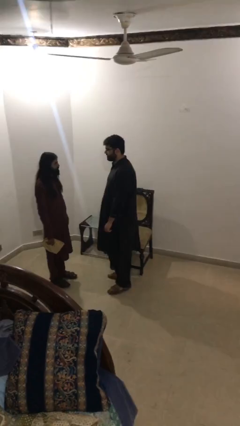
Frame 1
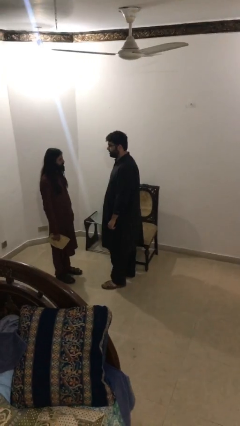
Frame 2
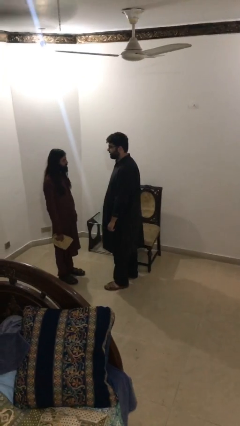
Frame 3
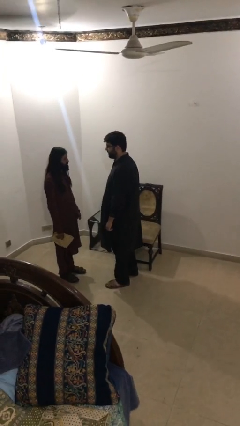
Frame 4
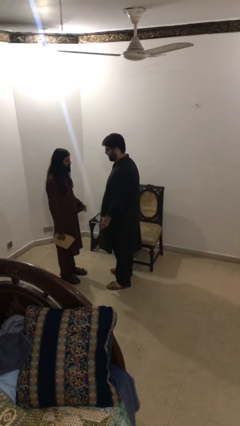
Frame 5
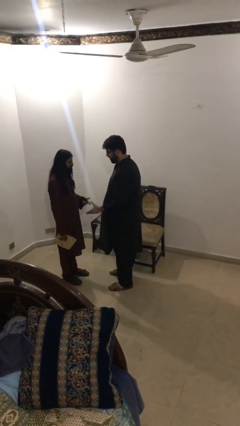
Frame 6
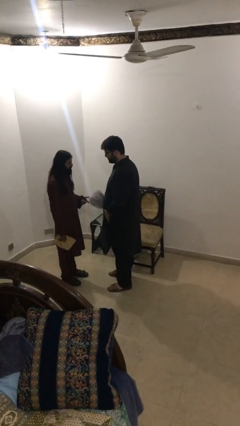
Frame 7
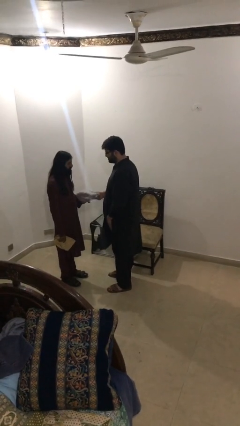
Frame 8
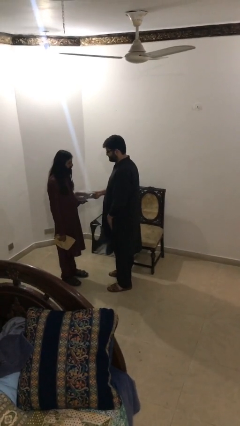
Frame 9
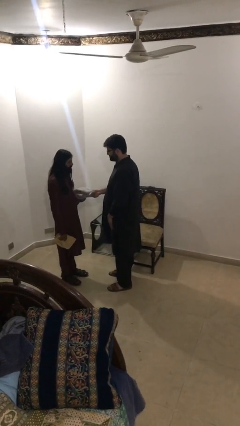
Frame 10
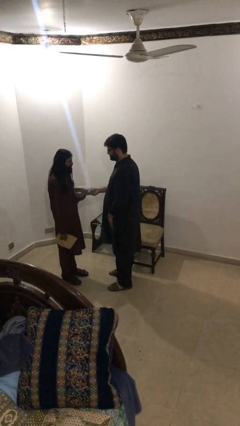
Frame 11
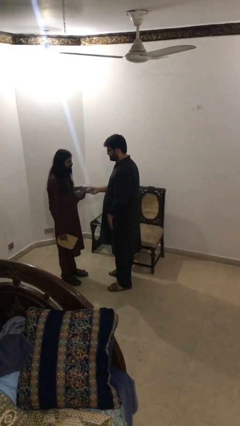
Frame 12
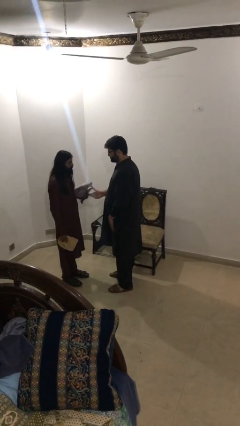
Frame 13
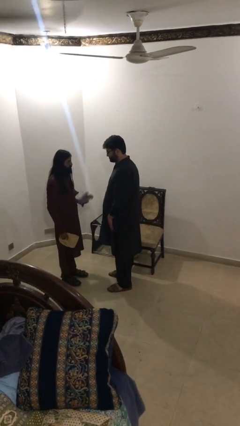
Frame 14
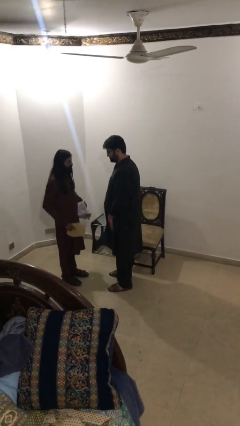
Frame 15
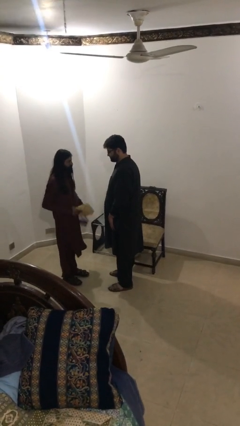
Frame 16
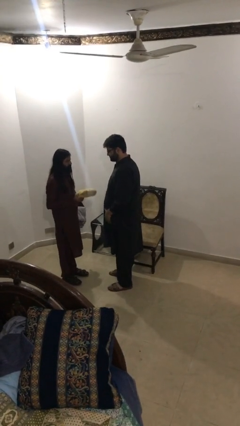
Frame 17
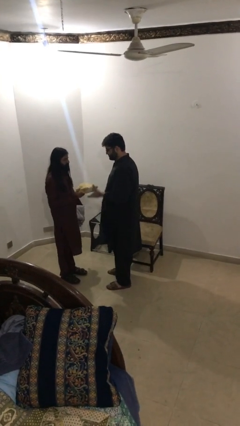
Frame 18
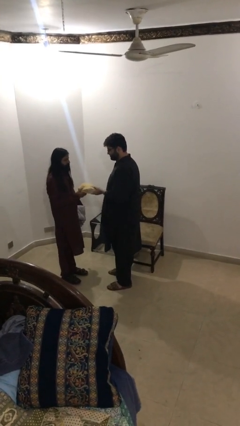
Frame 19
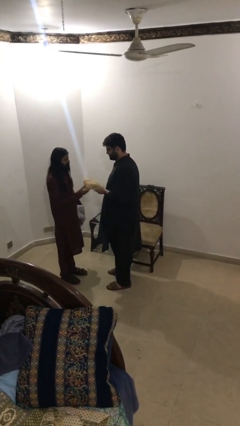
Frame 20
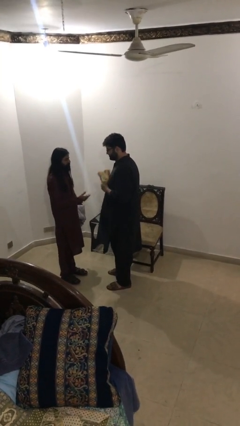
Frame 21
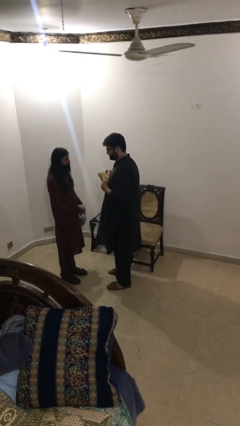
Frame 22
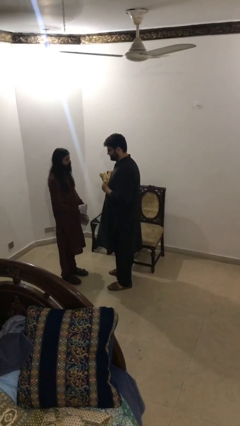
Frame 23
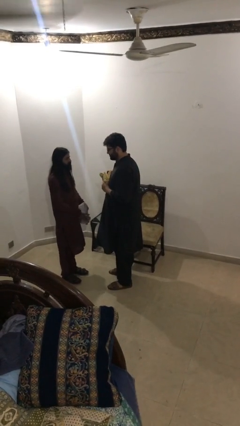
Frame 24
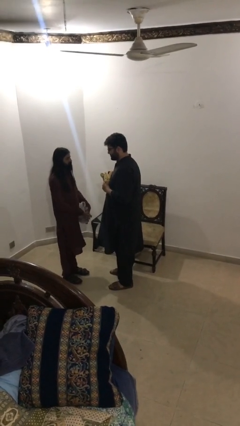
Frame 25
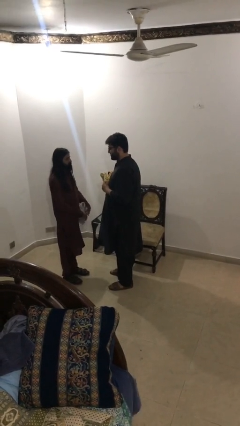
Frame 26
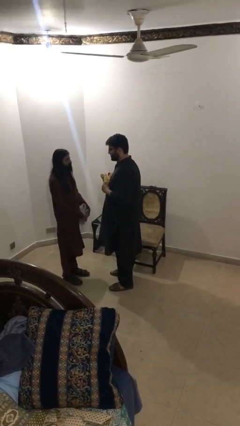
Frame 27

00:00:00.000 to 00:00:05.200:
person transfers object to person

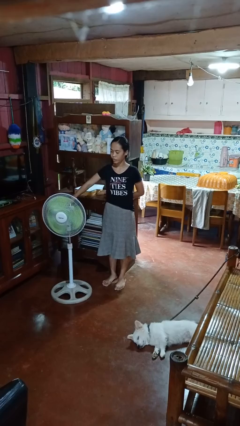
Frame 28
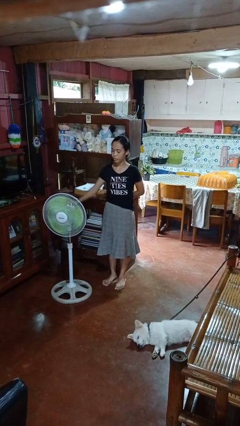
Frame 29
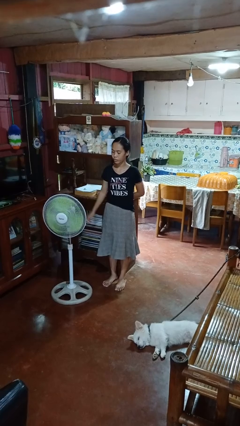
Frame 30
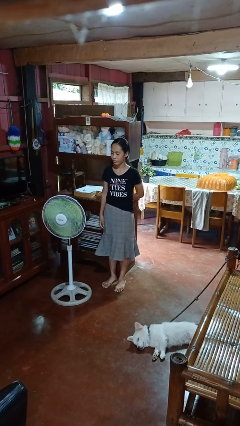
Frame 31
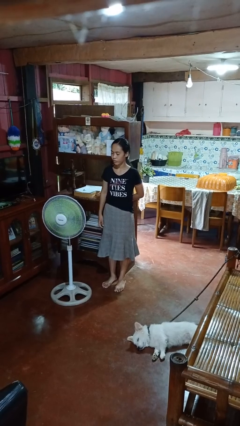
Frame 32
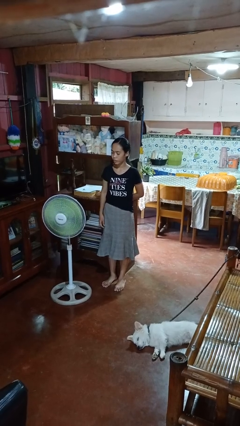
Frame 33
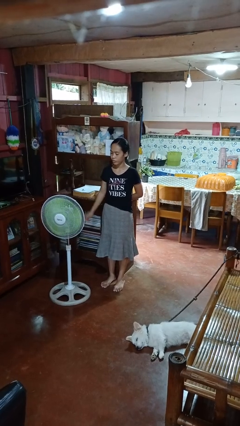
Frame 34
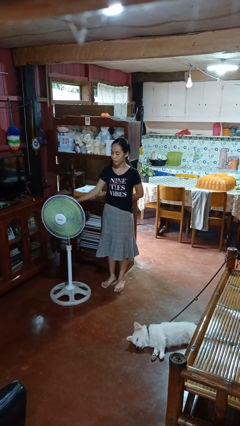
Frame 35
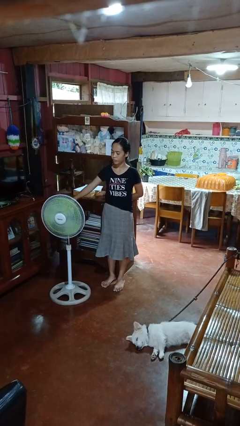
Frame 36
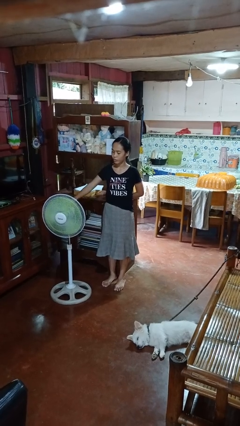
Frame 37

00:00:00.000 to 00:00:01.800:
person turns on fan

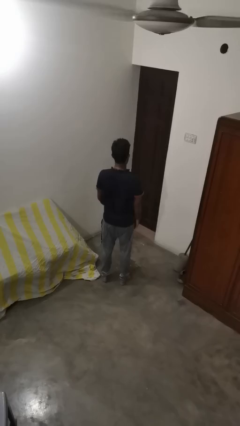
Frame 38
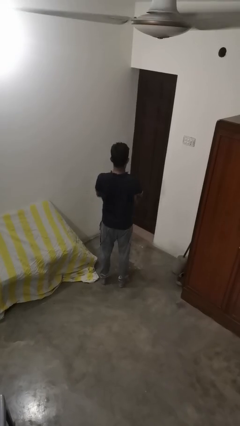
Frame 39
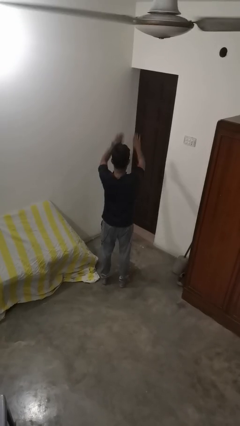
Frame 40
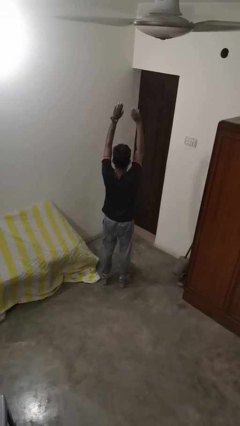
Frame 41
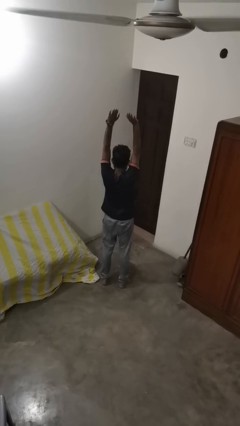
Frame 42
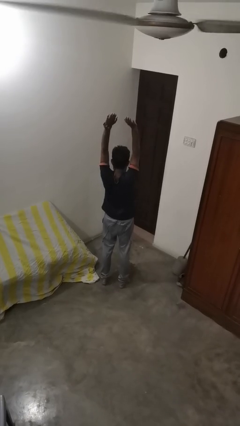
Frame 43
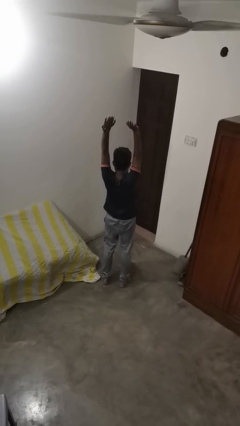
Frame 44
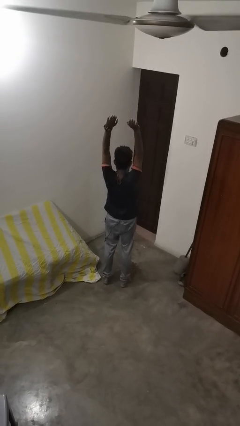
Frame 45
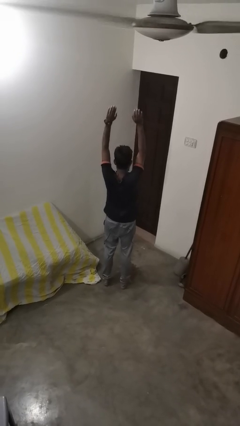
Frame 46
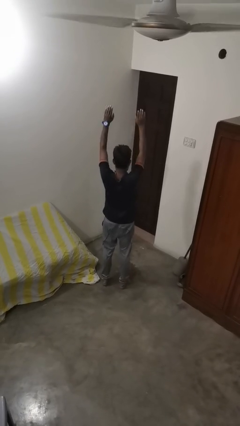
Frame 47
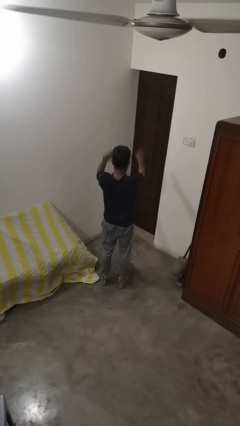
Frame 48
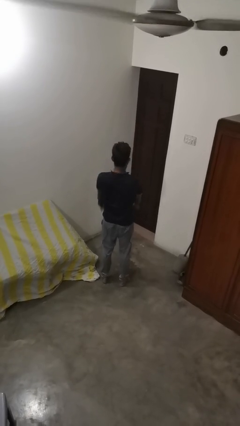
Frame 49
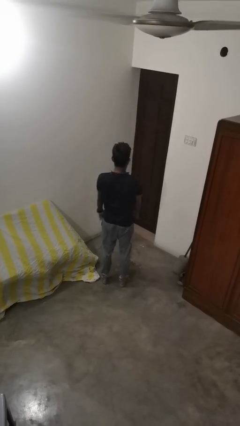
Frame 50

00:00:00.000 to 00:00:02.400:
person stretches arms over head

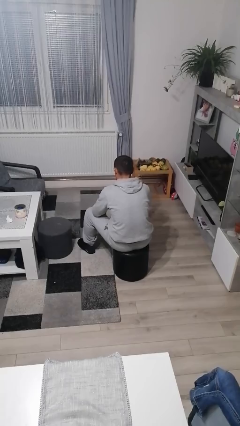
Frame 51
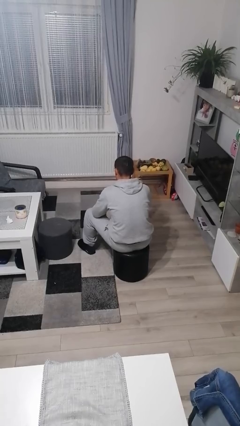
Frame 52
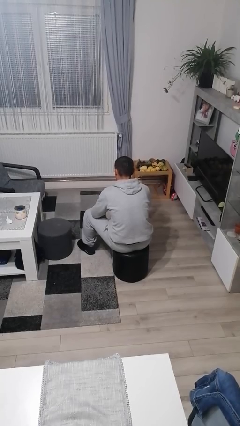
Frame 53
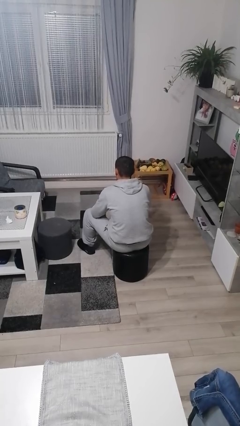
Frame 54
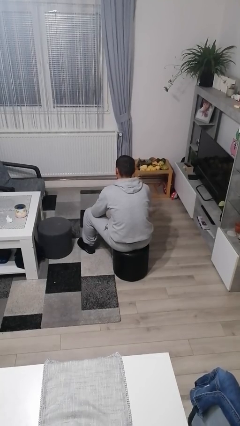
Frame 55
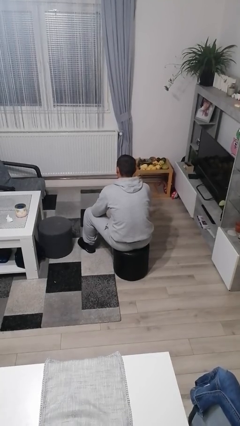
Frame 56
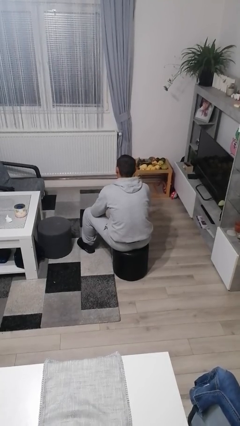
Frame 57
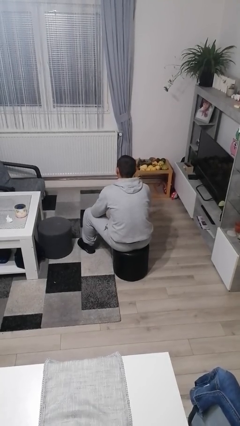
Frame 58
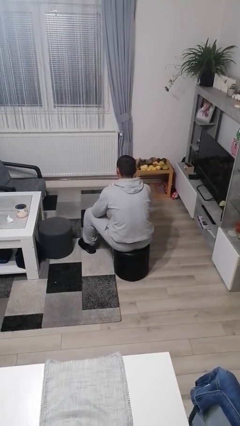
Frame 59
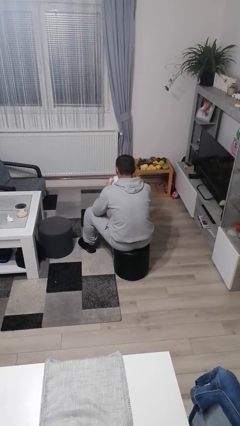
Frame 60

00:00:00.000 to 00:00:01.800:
person gestures behind me

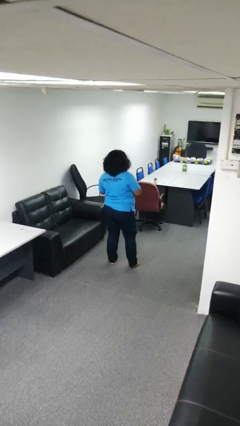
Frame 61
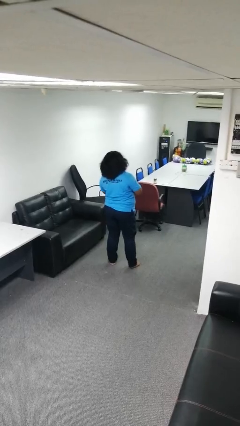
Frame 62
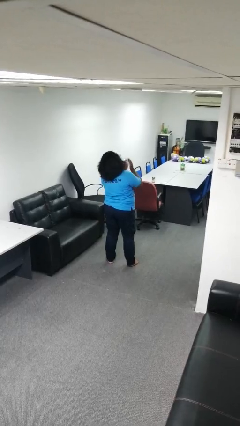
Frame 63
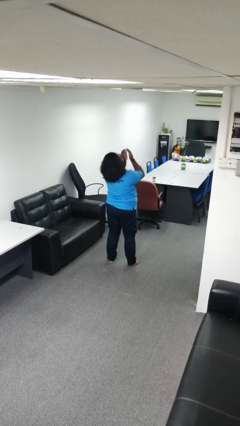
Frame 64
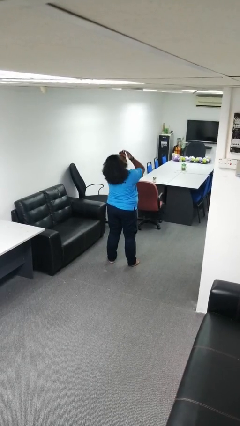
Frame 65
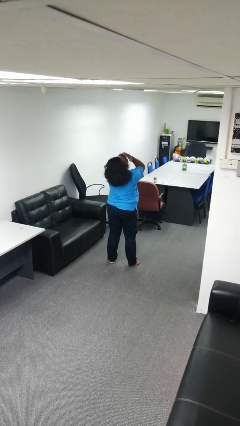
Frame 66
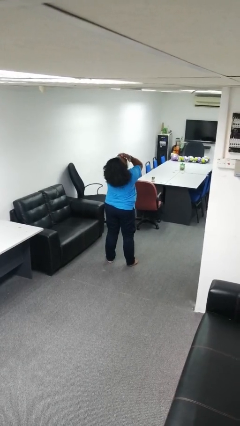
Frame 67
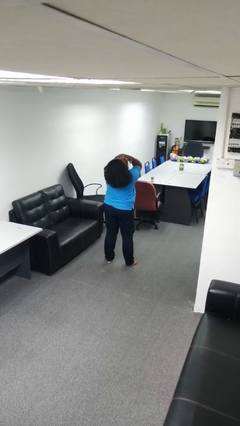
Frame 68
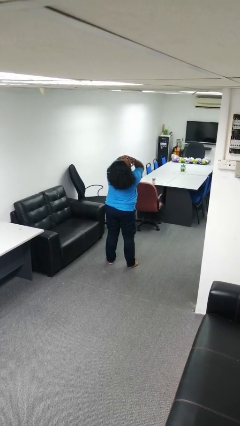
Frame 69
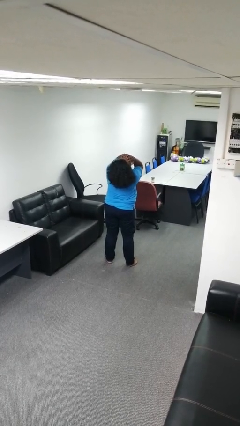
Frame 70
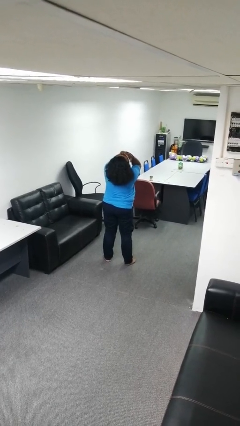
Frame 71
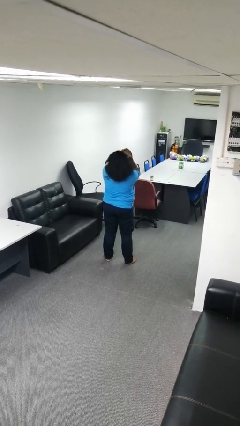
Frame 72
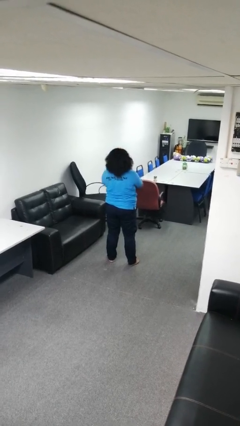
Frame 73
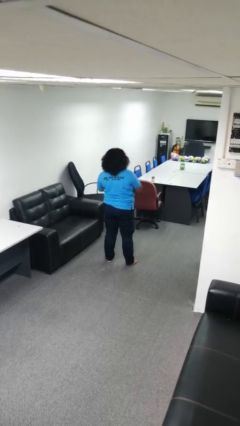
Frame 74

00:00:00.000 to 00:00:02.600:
person covers face with hands

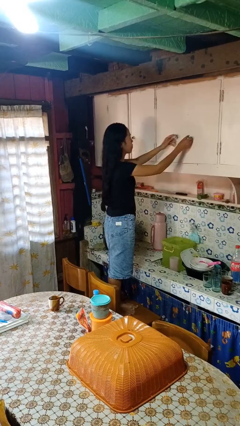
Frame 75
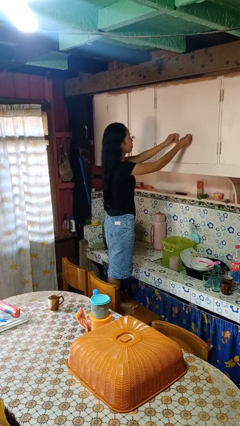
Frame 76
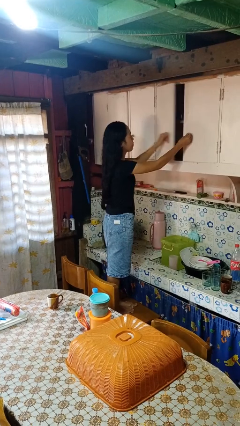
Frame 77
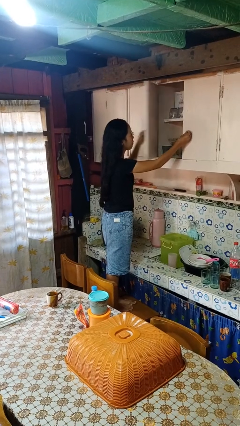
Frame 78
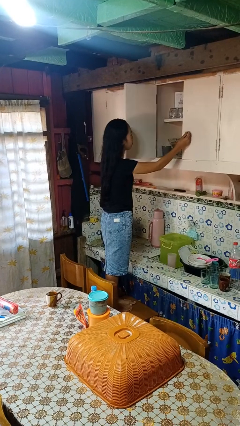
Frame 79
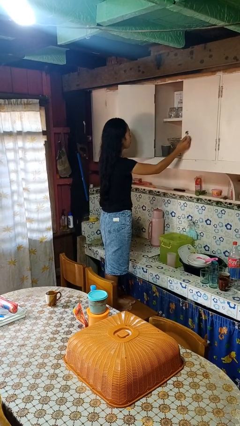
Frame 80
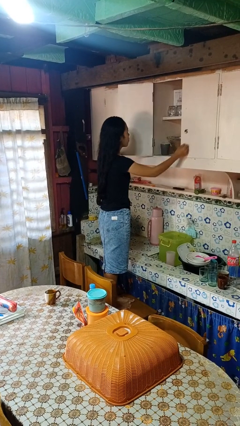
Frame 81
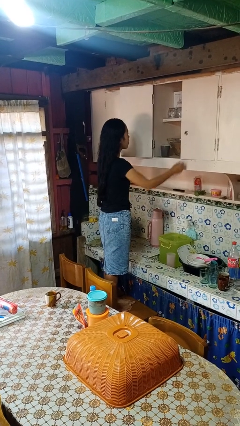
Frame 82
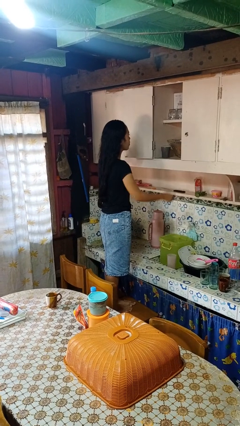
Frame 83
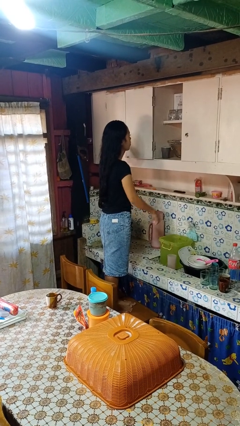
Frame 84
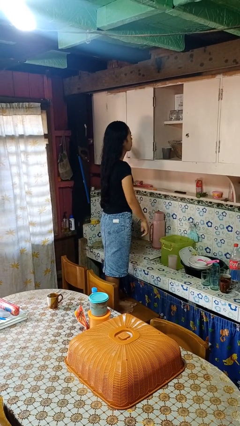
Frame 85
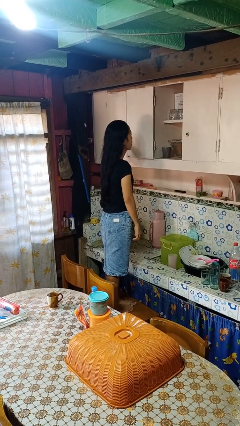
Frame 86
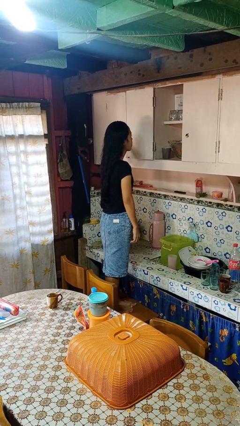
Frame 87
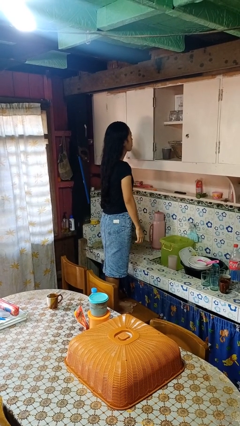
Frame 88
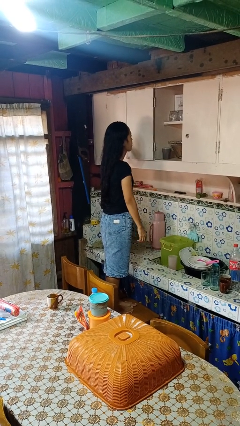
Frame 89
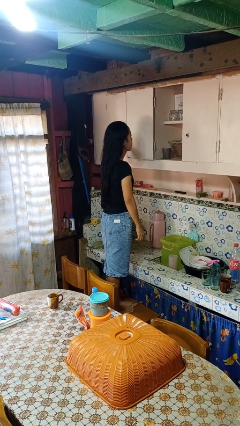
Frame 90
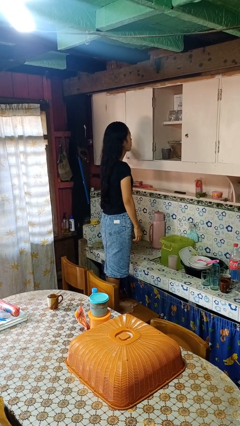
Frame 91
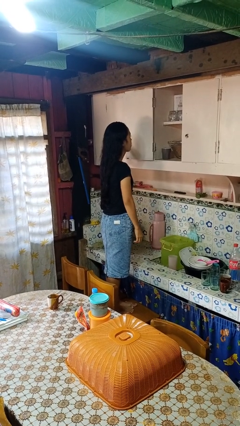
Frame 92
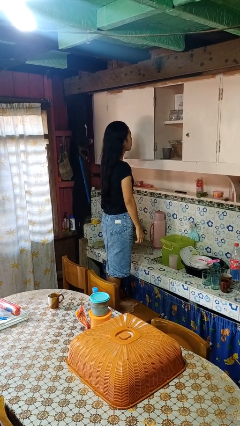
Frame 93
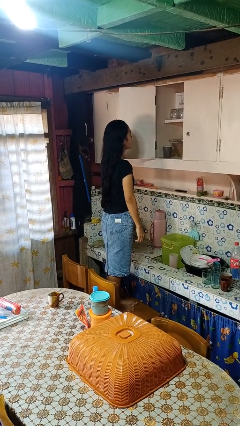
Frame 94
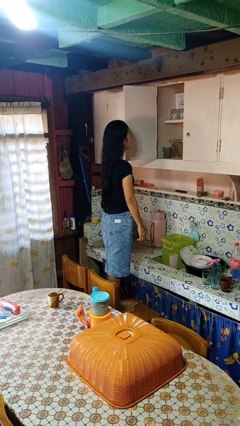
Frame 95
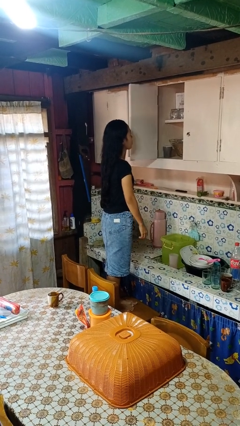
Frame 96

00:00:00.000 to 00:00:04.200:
person opens cabinet

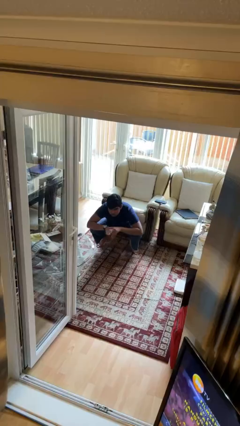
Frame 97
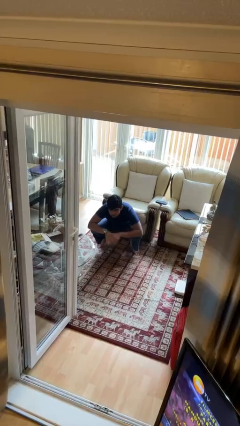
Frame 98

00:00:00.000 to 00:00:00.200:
person stands up
